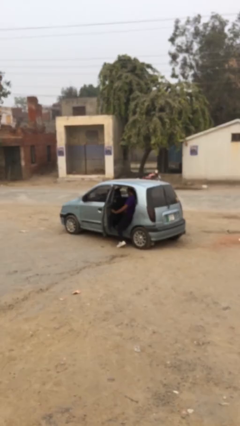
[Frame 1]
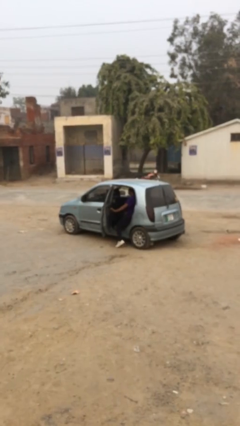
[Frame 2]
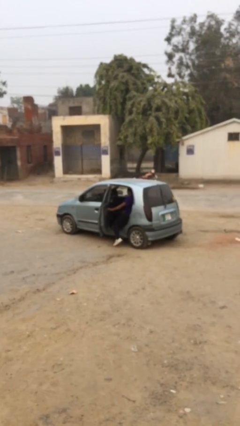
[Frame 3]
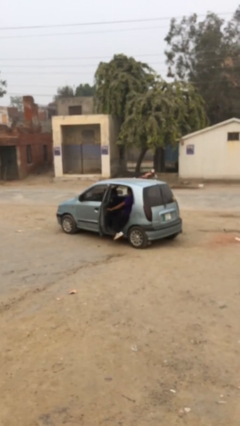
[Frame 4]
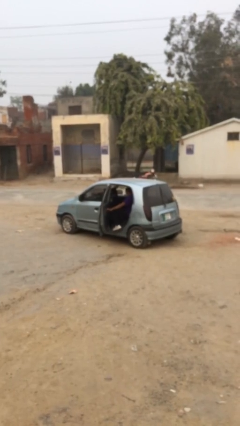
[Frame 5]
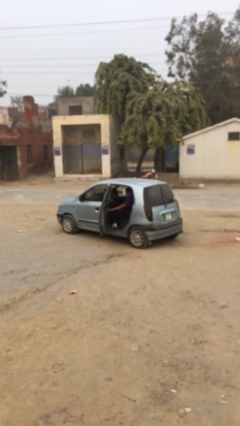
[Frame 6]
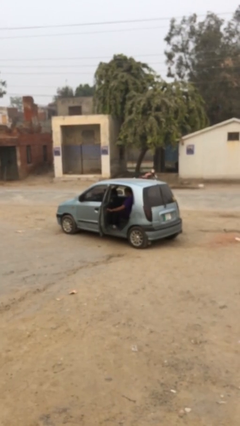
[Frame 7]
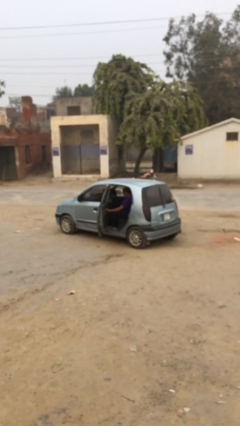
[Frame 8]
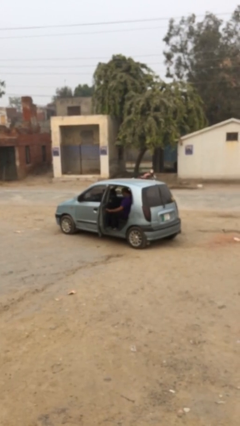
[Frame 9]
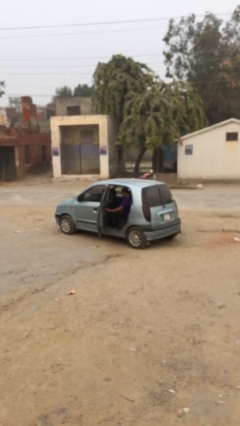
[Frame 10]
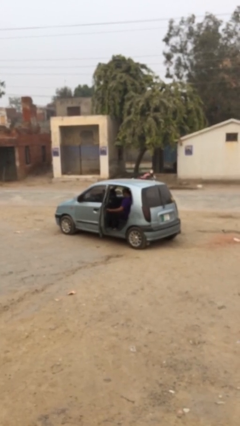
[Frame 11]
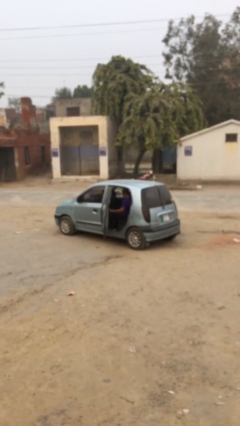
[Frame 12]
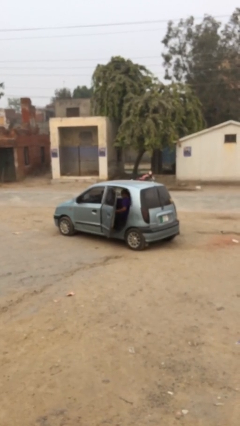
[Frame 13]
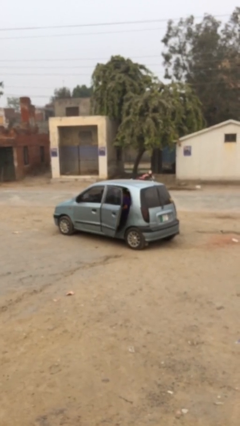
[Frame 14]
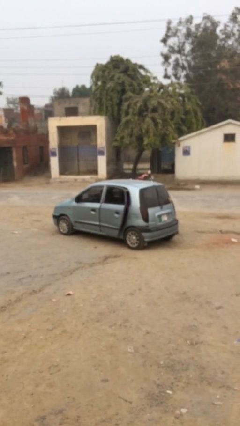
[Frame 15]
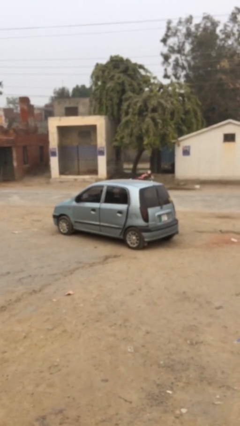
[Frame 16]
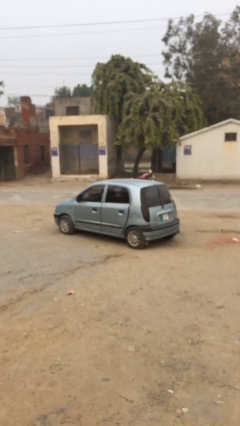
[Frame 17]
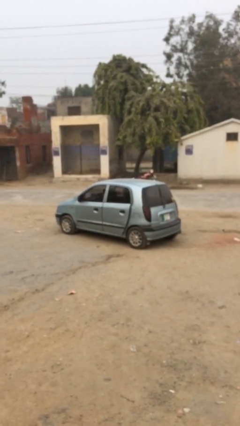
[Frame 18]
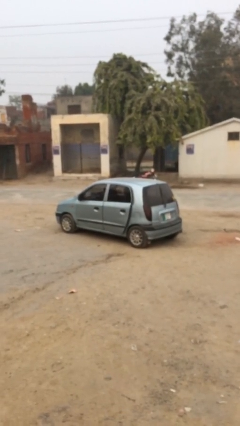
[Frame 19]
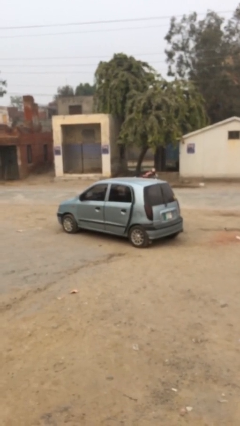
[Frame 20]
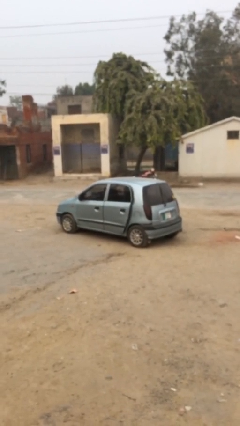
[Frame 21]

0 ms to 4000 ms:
person closes car door

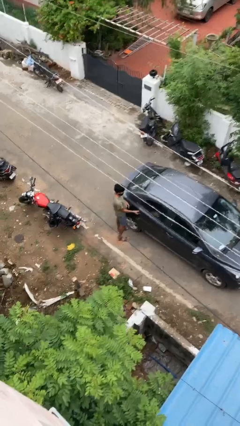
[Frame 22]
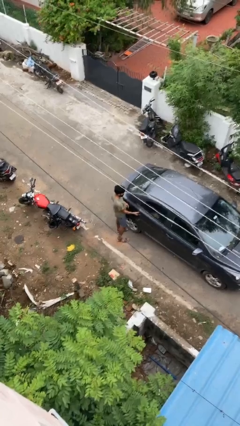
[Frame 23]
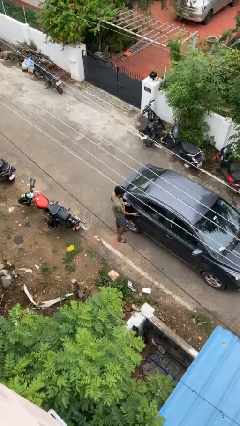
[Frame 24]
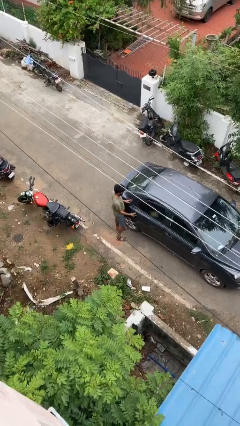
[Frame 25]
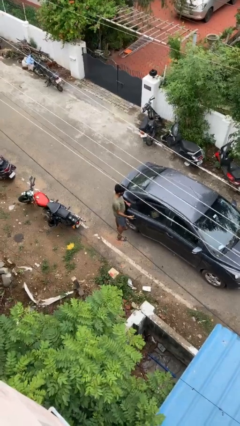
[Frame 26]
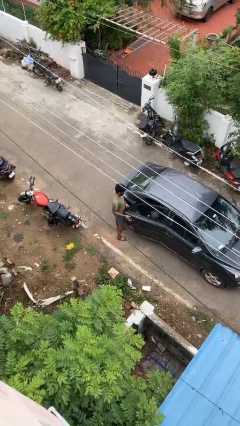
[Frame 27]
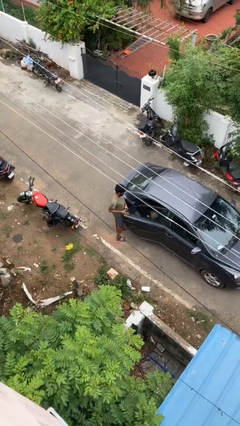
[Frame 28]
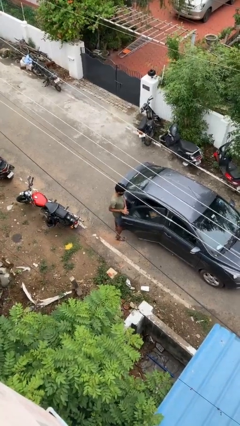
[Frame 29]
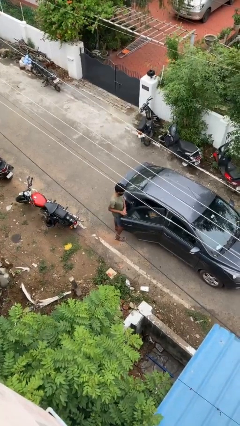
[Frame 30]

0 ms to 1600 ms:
person opens car door

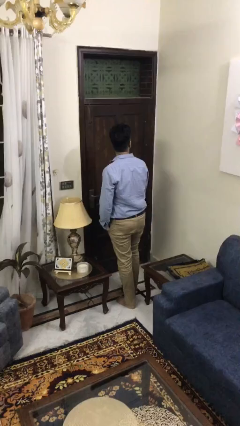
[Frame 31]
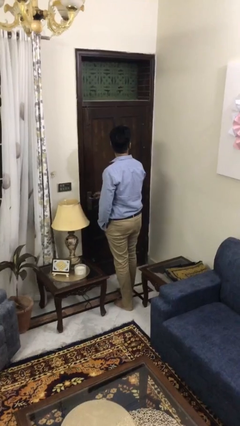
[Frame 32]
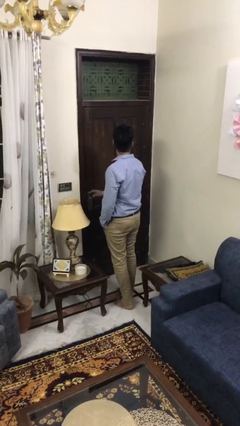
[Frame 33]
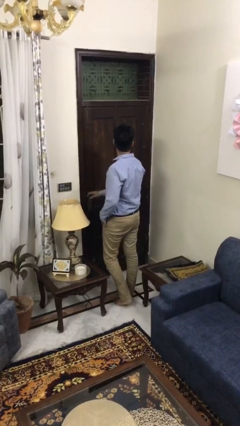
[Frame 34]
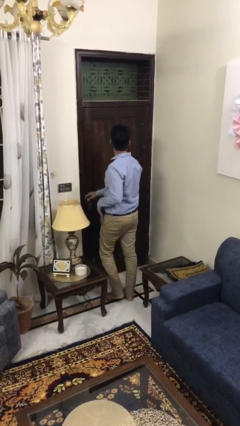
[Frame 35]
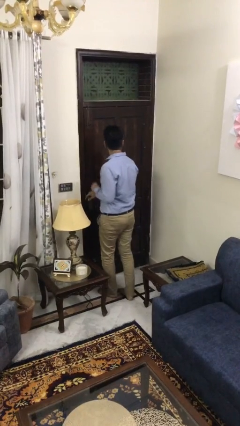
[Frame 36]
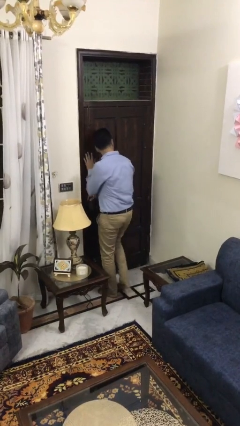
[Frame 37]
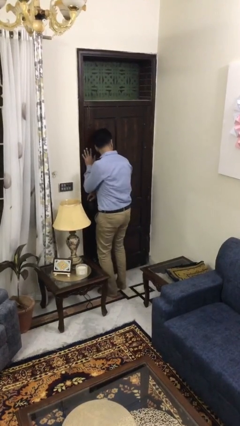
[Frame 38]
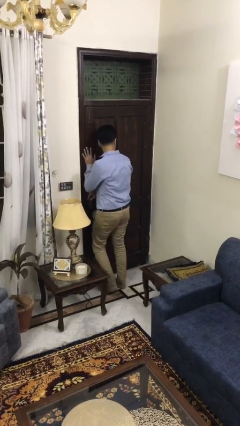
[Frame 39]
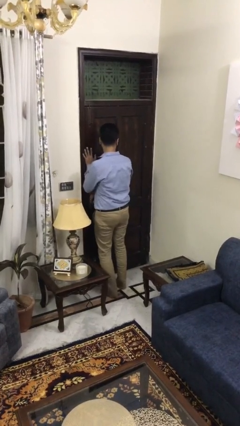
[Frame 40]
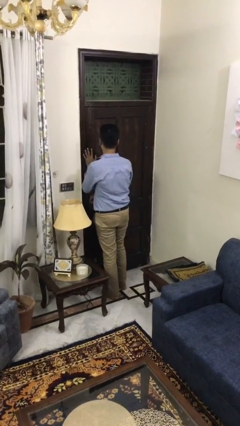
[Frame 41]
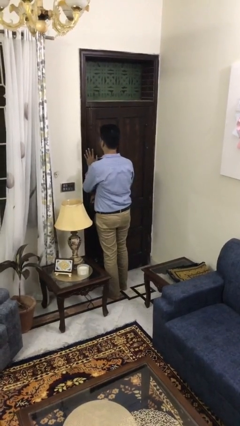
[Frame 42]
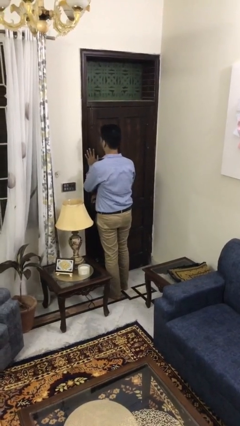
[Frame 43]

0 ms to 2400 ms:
person bumps into wall

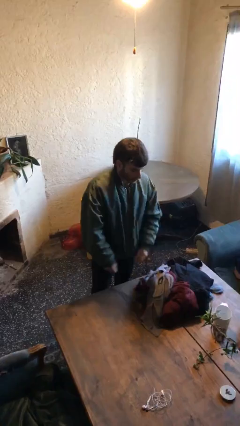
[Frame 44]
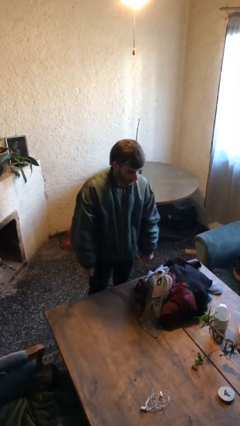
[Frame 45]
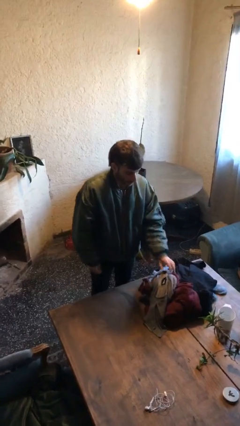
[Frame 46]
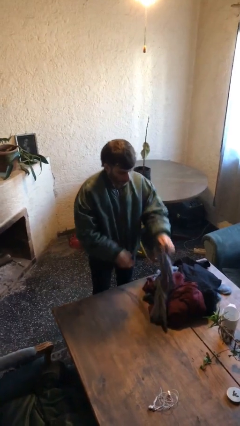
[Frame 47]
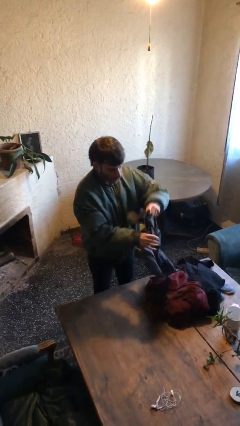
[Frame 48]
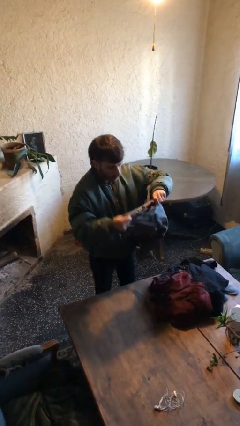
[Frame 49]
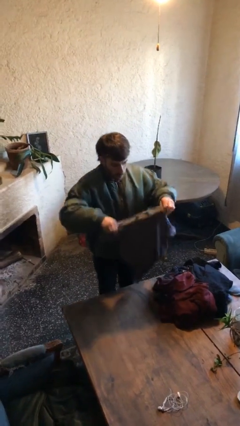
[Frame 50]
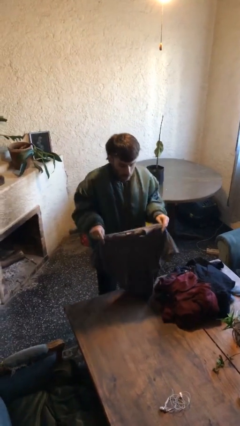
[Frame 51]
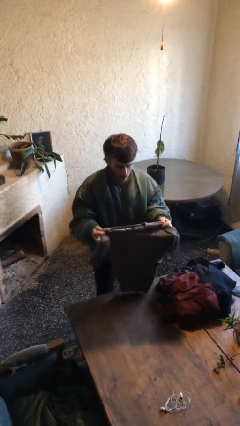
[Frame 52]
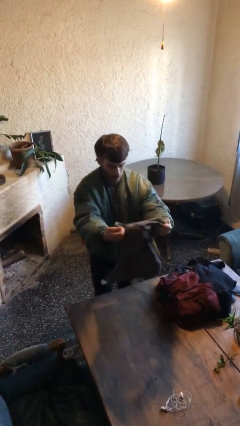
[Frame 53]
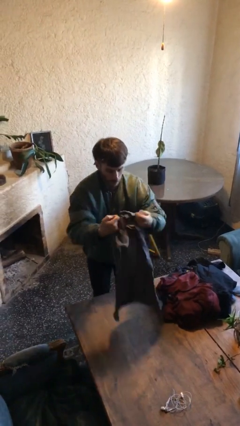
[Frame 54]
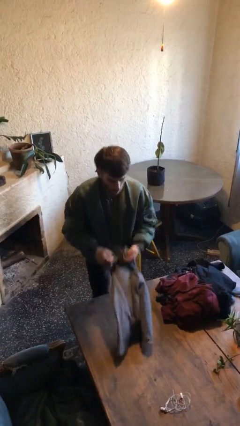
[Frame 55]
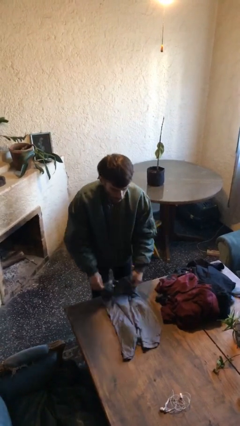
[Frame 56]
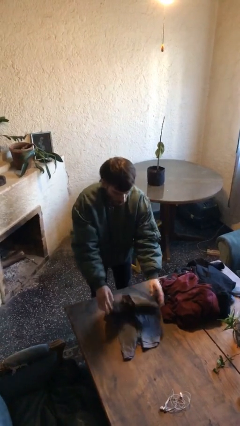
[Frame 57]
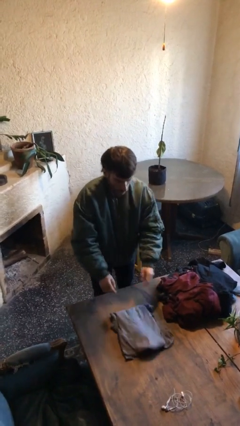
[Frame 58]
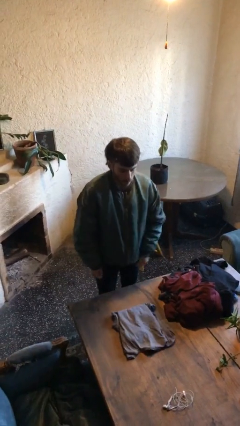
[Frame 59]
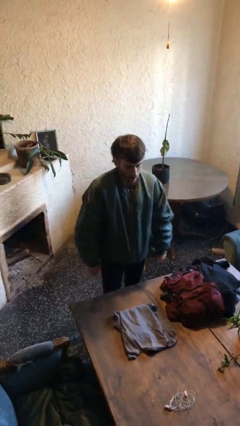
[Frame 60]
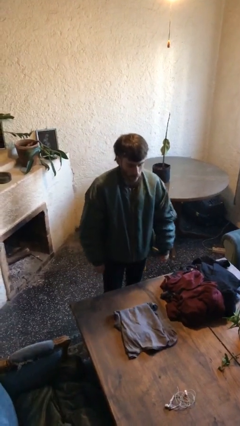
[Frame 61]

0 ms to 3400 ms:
person folds shirt

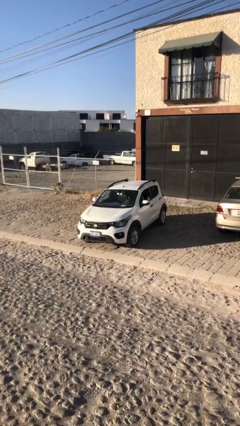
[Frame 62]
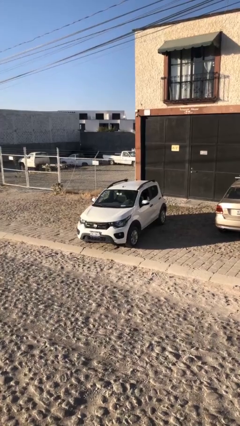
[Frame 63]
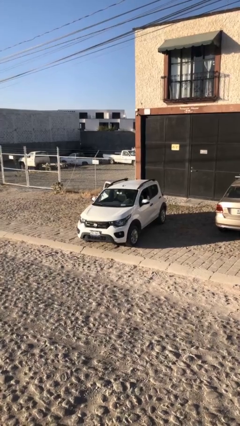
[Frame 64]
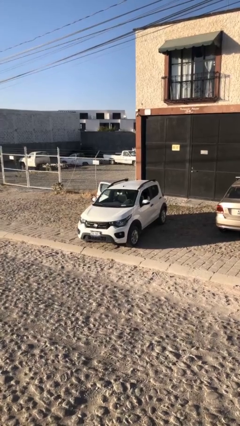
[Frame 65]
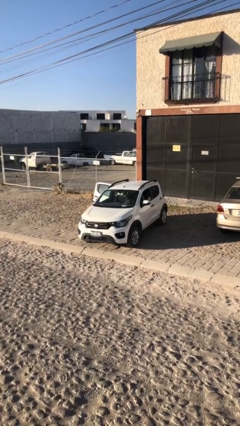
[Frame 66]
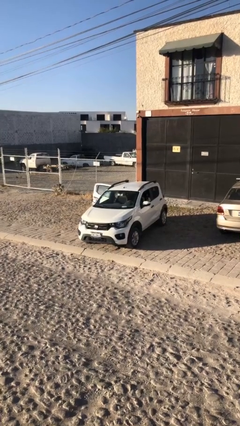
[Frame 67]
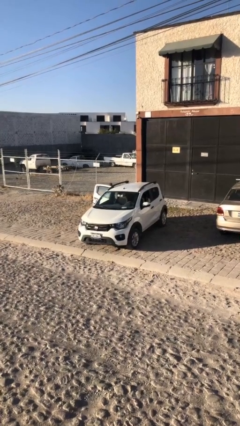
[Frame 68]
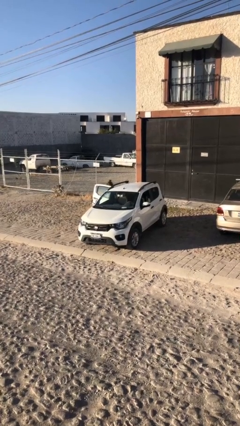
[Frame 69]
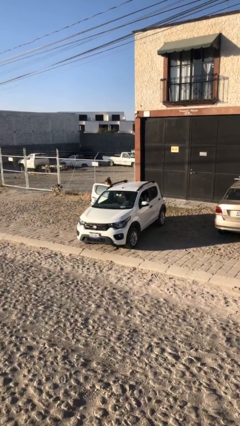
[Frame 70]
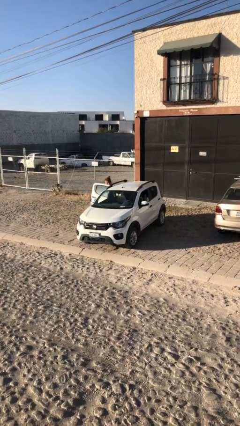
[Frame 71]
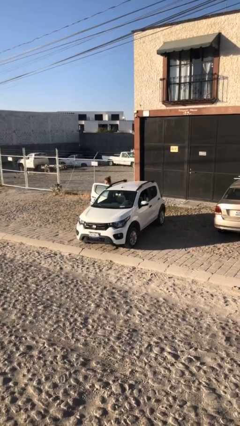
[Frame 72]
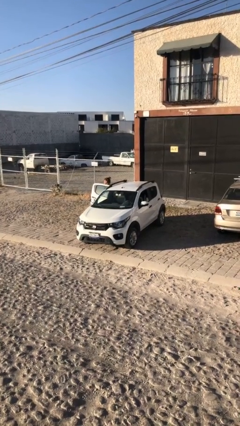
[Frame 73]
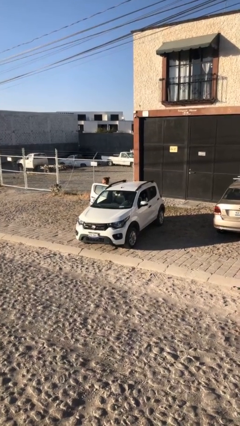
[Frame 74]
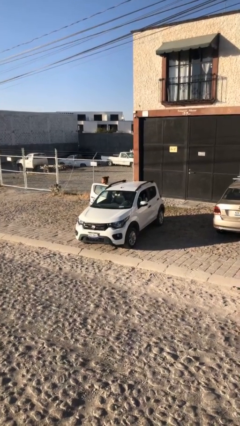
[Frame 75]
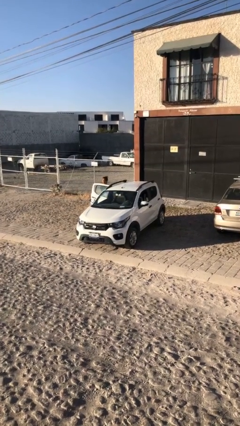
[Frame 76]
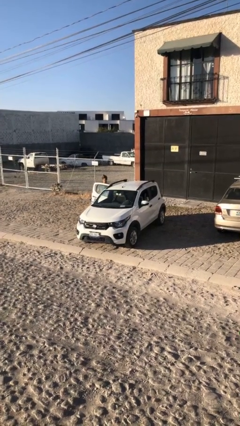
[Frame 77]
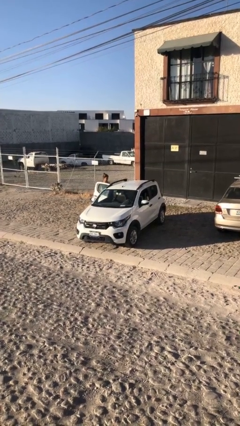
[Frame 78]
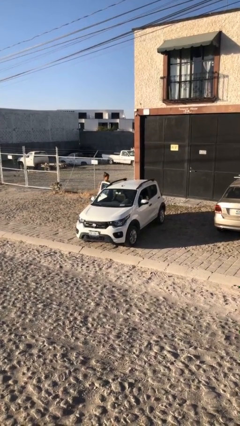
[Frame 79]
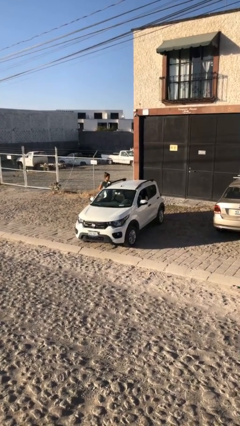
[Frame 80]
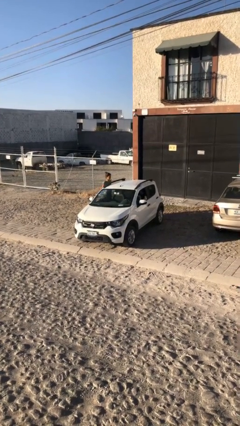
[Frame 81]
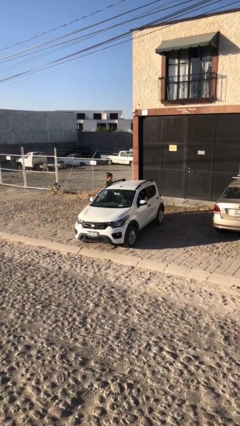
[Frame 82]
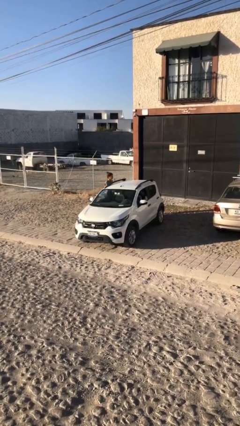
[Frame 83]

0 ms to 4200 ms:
car drops off person

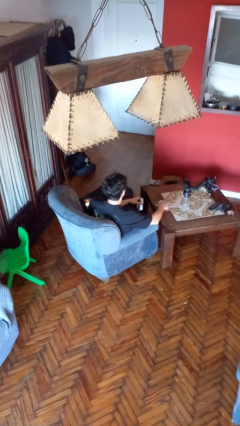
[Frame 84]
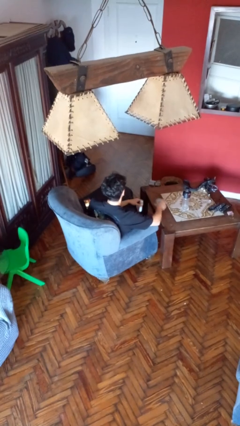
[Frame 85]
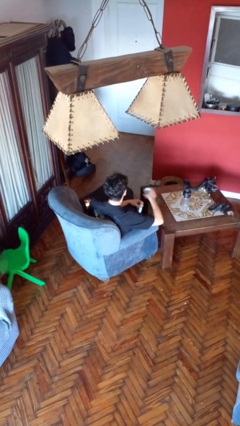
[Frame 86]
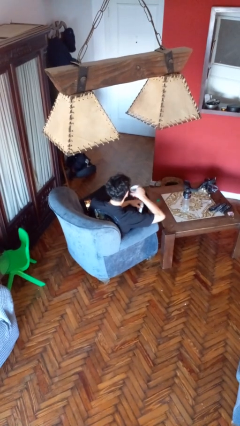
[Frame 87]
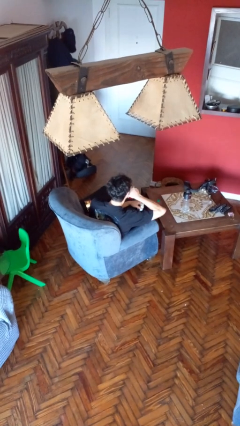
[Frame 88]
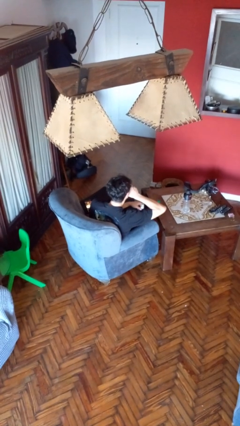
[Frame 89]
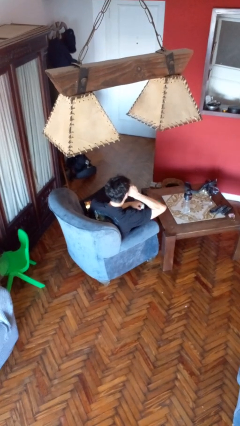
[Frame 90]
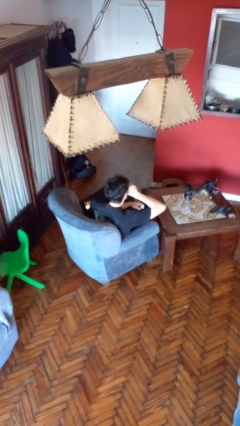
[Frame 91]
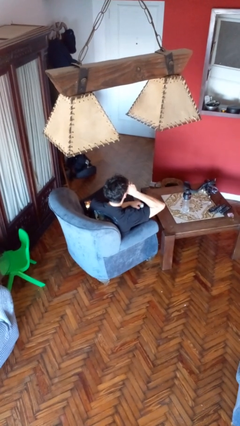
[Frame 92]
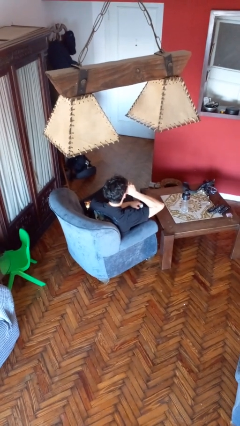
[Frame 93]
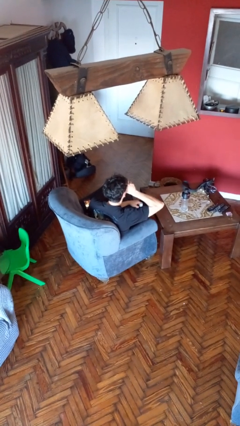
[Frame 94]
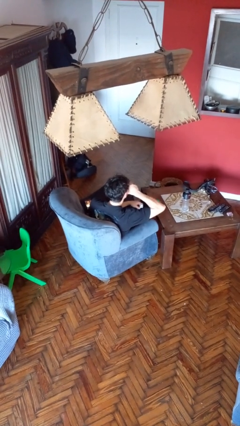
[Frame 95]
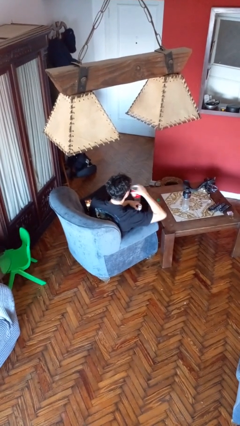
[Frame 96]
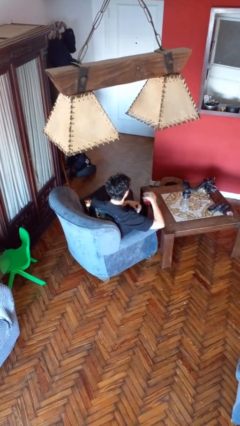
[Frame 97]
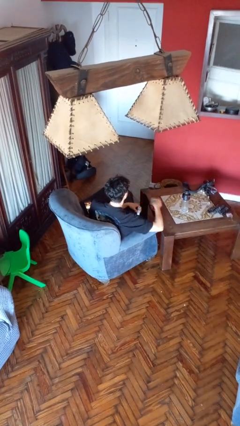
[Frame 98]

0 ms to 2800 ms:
person drinks from cup
